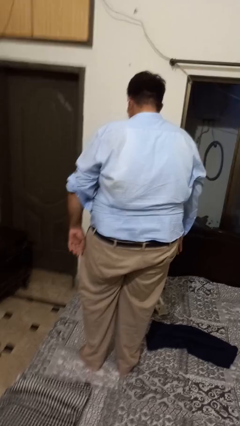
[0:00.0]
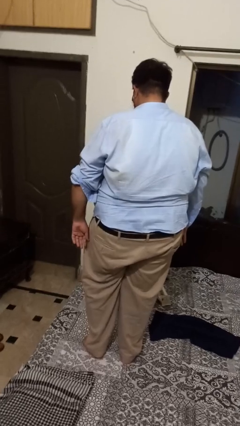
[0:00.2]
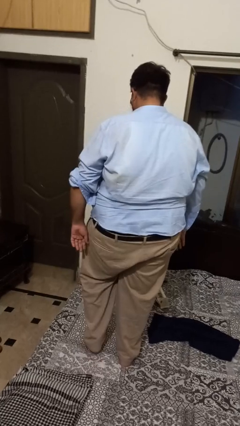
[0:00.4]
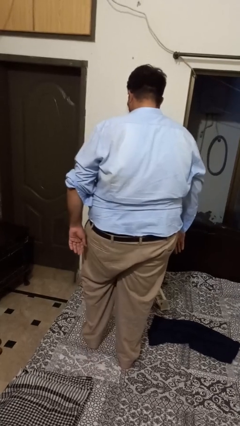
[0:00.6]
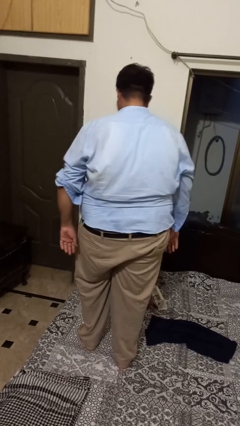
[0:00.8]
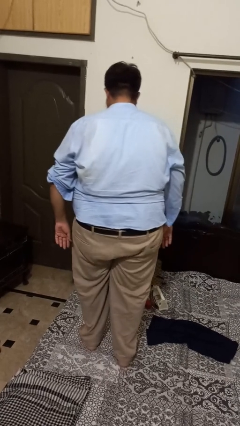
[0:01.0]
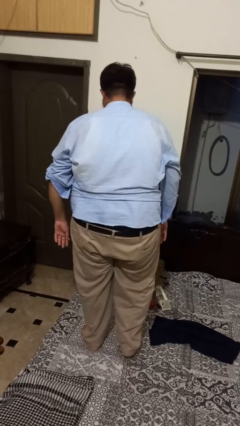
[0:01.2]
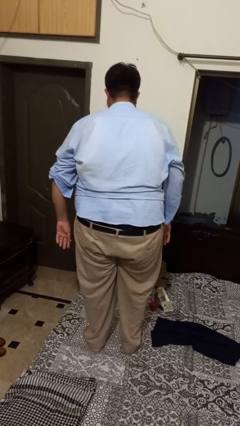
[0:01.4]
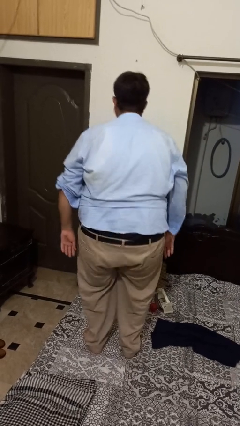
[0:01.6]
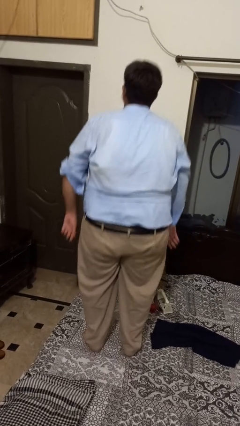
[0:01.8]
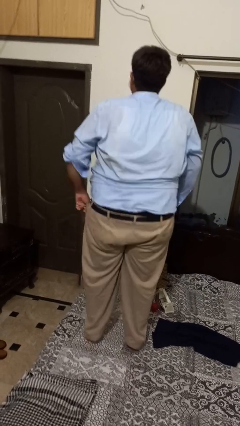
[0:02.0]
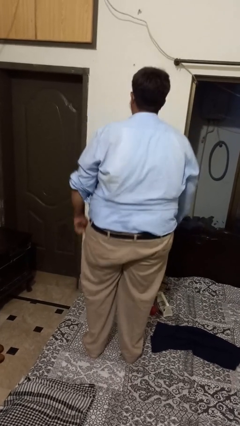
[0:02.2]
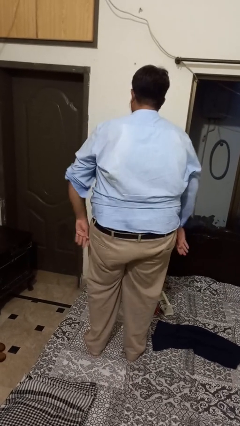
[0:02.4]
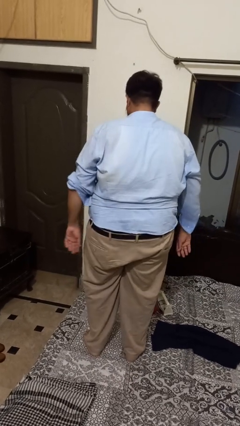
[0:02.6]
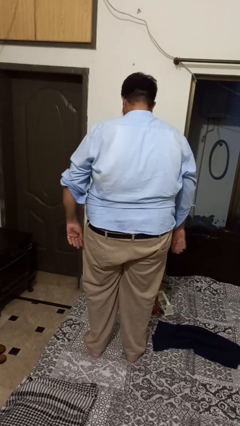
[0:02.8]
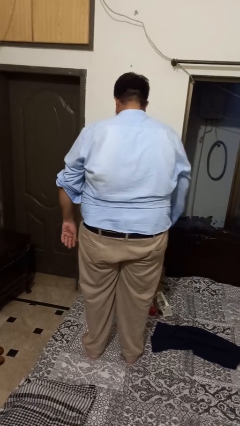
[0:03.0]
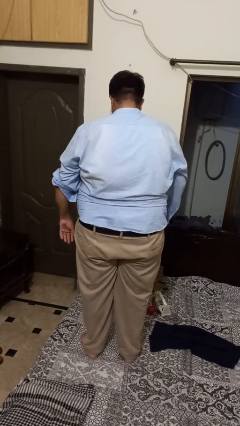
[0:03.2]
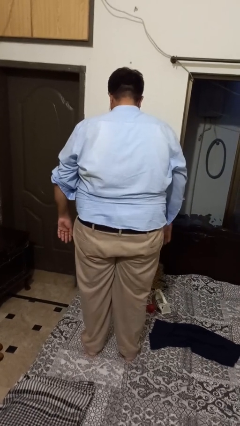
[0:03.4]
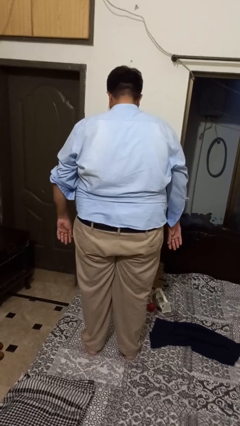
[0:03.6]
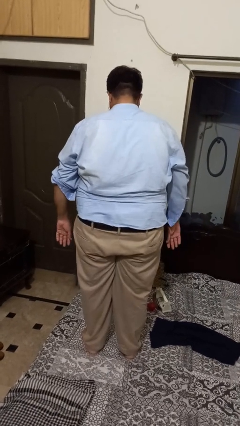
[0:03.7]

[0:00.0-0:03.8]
person jumps on bed

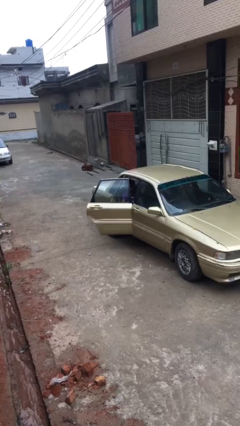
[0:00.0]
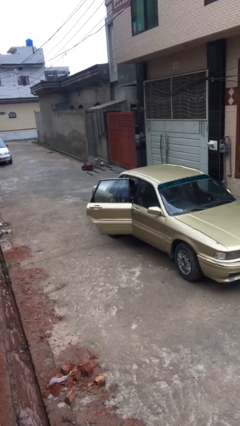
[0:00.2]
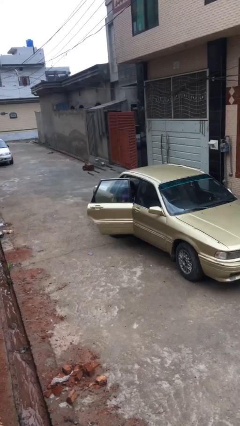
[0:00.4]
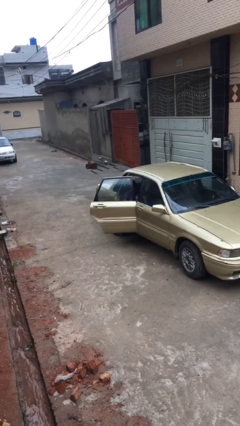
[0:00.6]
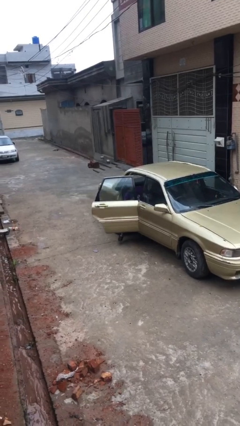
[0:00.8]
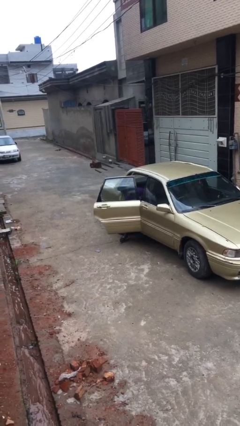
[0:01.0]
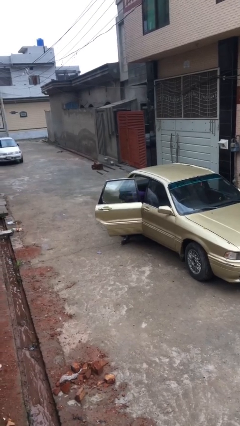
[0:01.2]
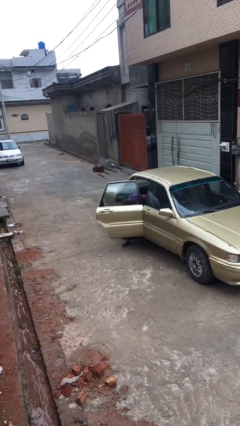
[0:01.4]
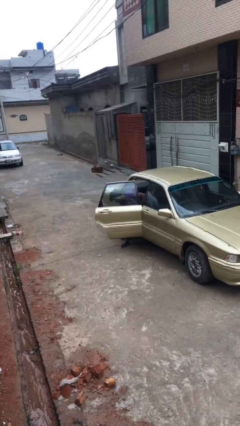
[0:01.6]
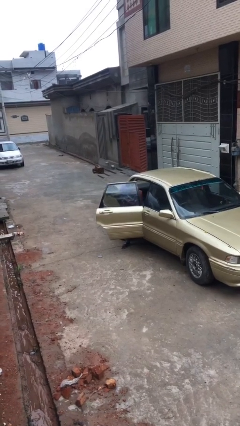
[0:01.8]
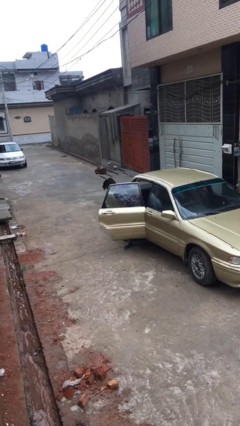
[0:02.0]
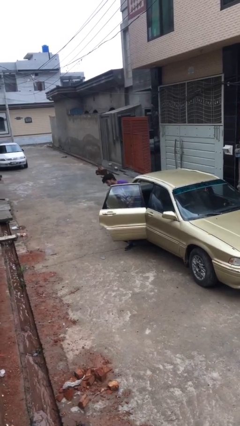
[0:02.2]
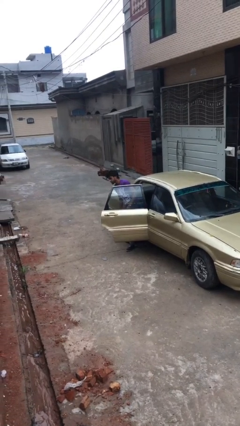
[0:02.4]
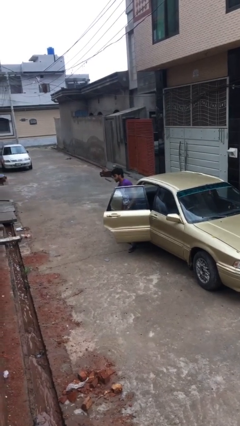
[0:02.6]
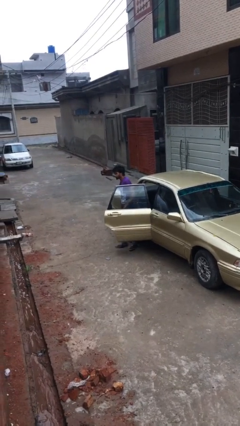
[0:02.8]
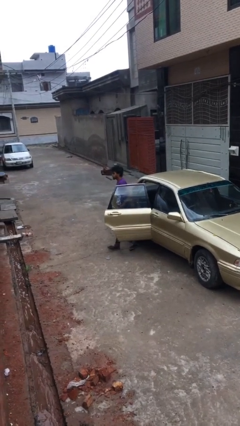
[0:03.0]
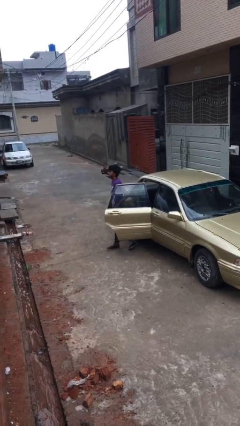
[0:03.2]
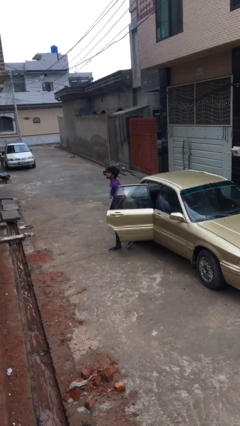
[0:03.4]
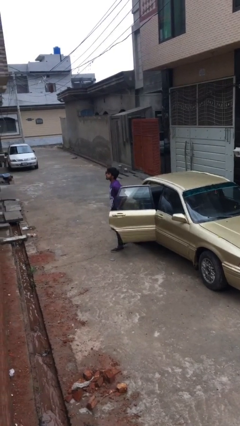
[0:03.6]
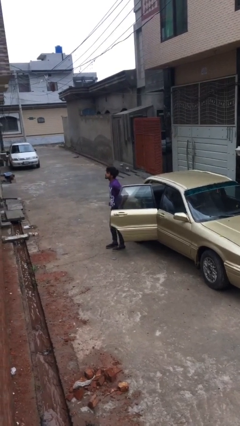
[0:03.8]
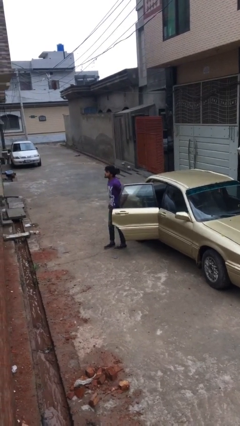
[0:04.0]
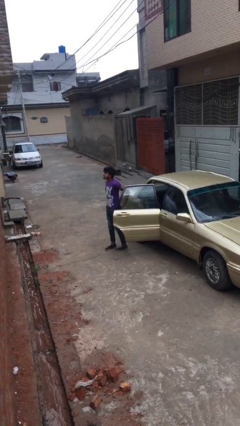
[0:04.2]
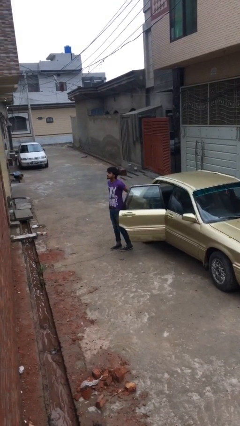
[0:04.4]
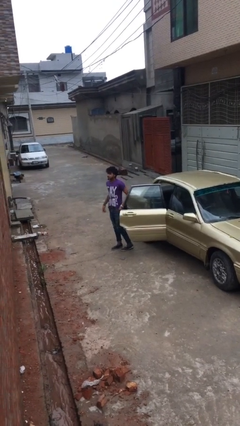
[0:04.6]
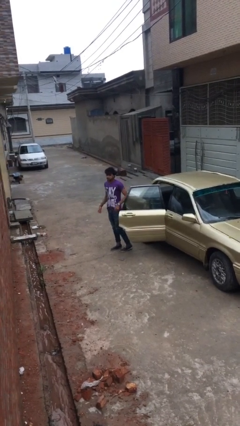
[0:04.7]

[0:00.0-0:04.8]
person exits car

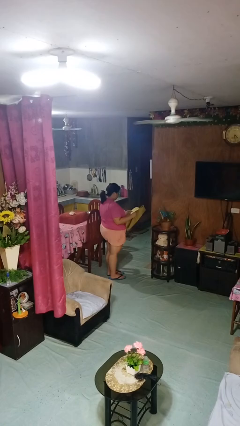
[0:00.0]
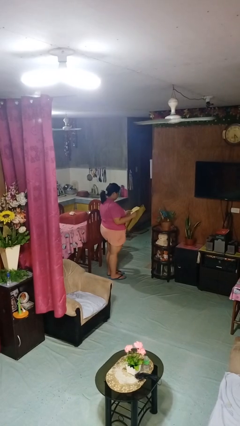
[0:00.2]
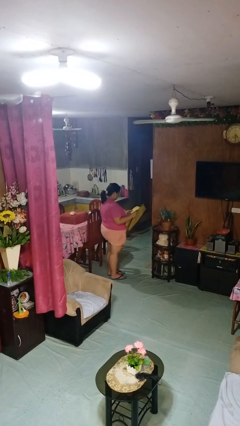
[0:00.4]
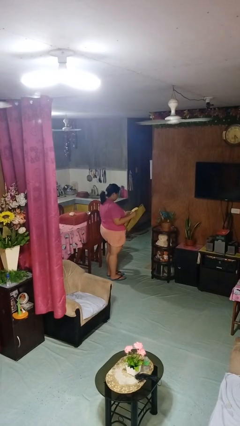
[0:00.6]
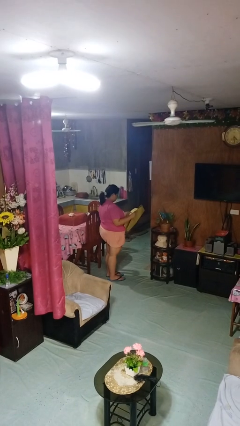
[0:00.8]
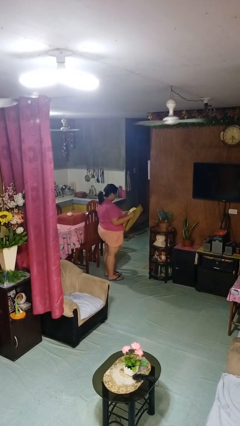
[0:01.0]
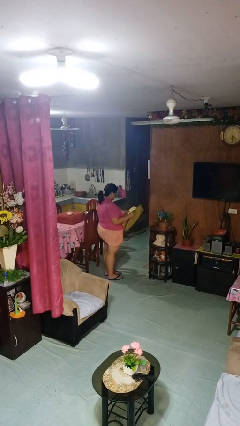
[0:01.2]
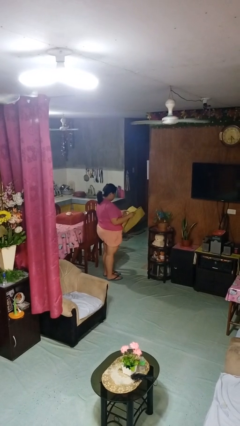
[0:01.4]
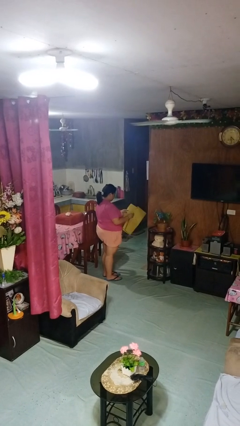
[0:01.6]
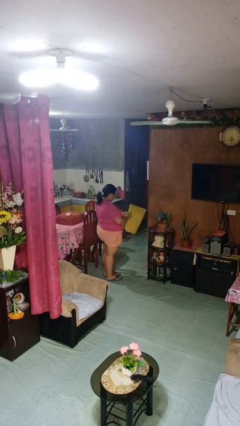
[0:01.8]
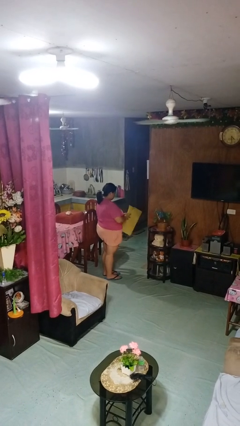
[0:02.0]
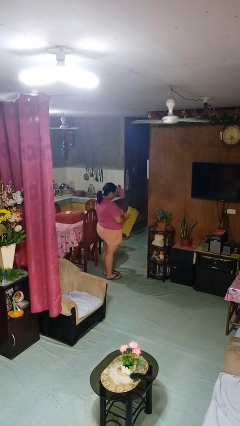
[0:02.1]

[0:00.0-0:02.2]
person reads newspaper

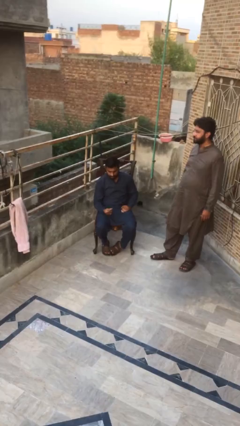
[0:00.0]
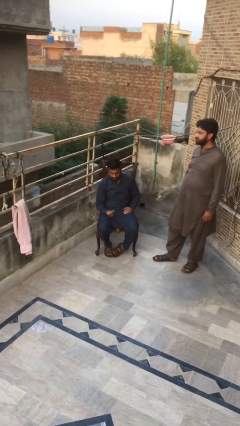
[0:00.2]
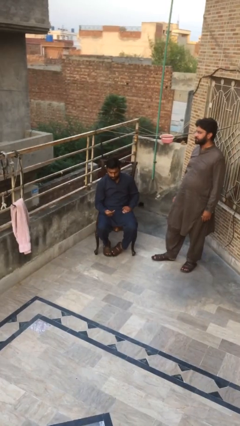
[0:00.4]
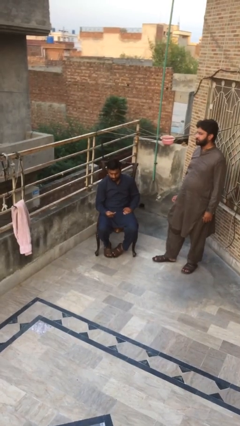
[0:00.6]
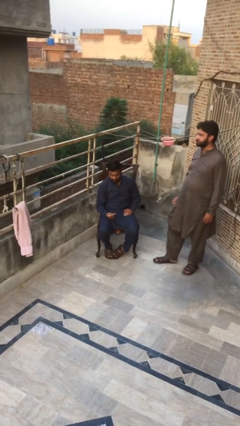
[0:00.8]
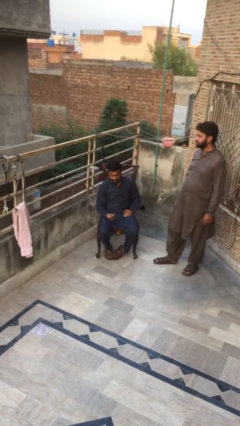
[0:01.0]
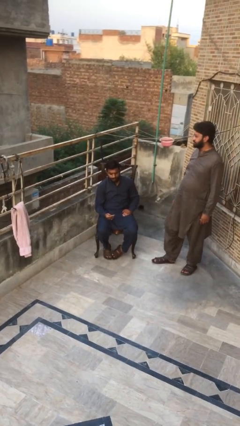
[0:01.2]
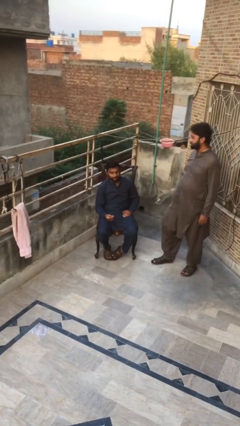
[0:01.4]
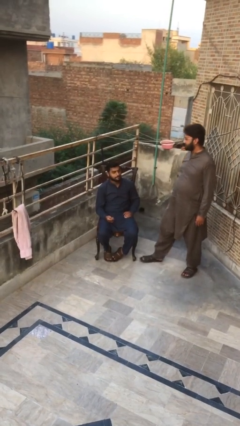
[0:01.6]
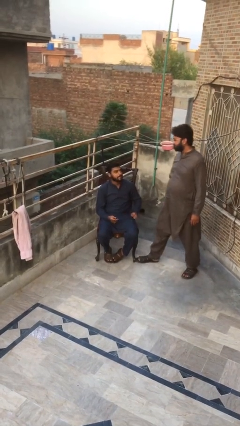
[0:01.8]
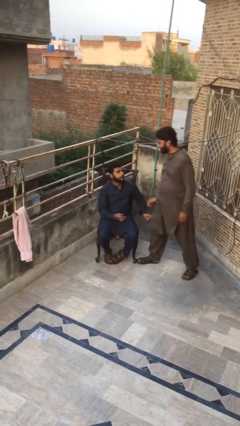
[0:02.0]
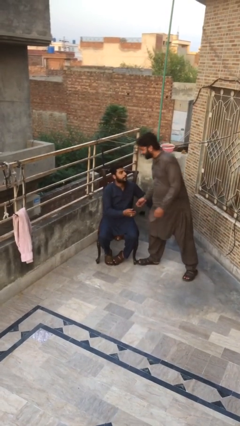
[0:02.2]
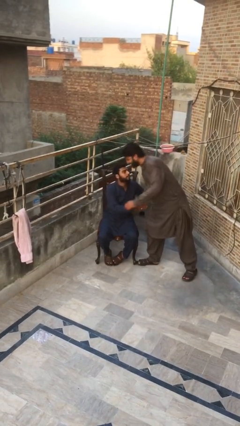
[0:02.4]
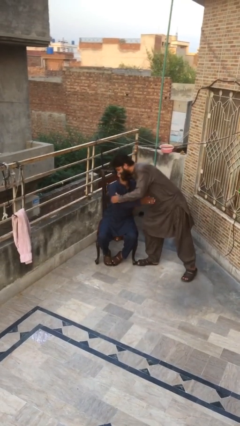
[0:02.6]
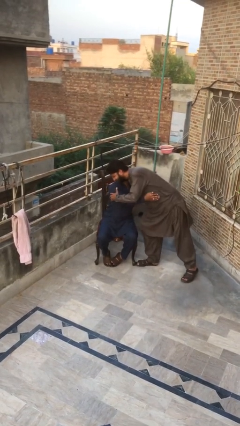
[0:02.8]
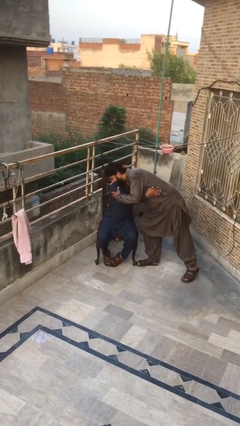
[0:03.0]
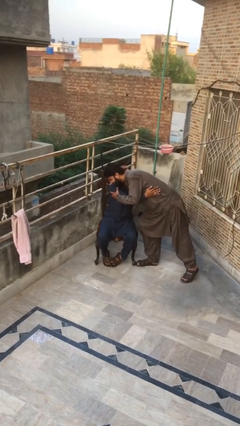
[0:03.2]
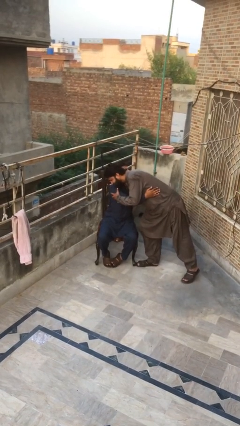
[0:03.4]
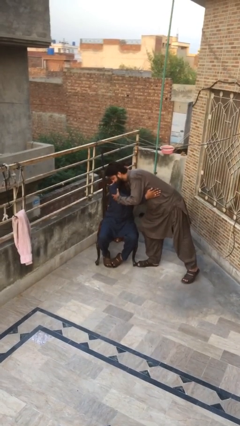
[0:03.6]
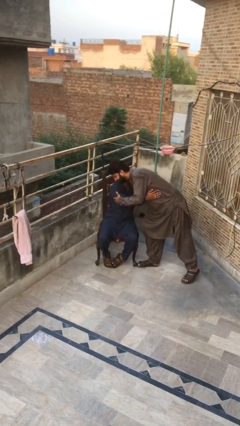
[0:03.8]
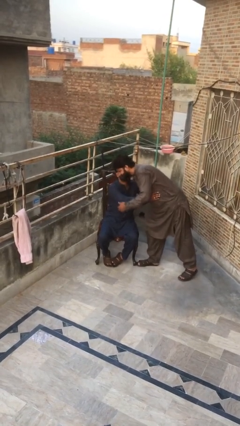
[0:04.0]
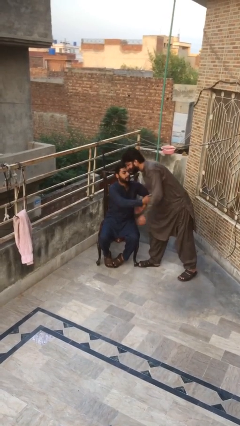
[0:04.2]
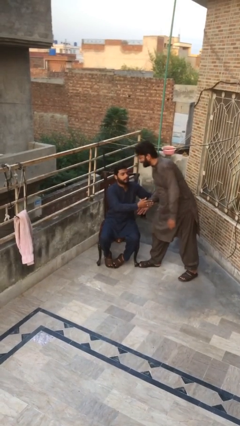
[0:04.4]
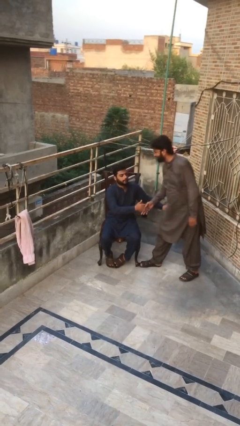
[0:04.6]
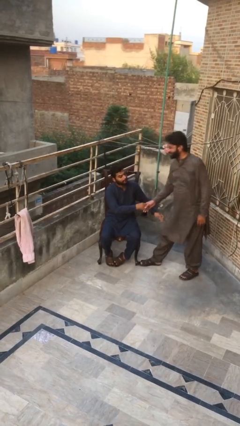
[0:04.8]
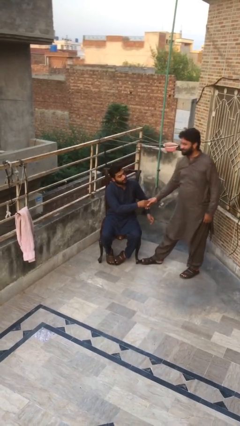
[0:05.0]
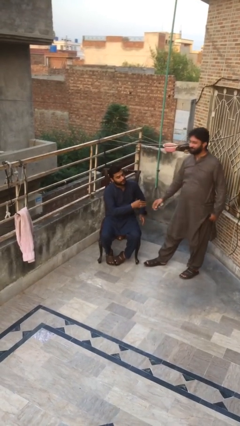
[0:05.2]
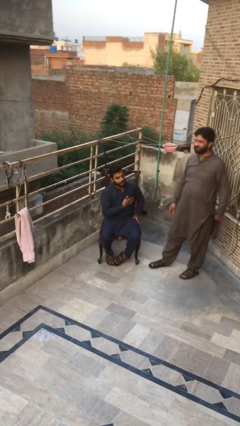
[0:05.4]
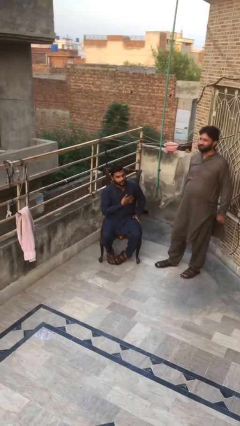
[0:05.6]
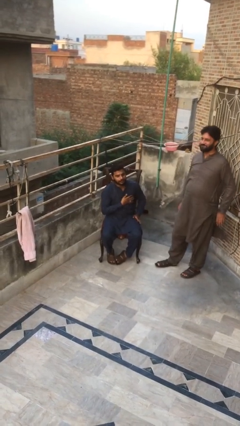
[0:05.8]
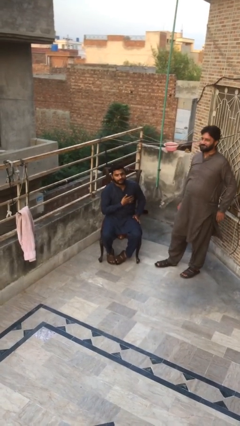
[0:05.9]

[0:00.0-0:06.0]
person embraces person

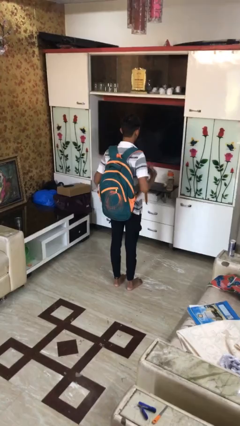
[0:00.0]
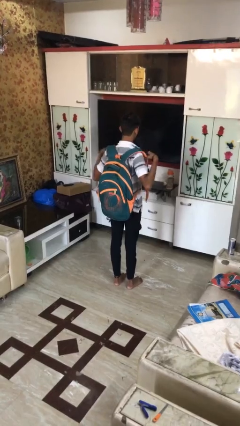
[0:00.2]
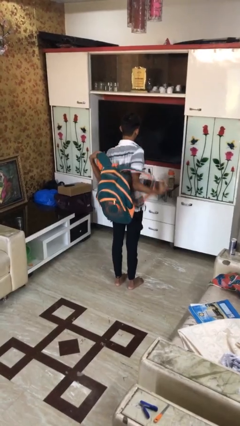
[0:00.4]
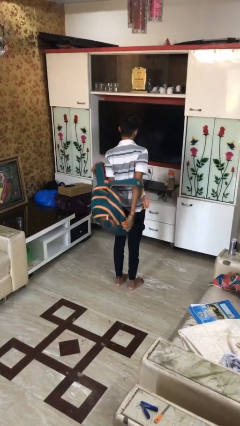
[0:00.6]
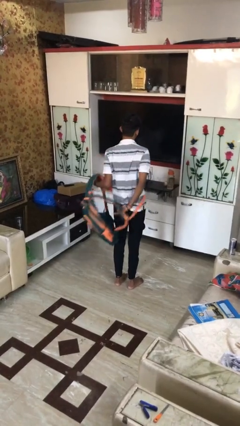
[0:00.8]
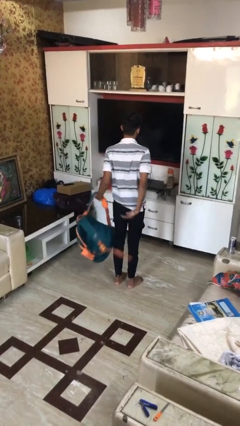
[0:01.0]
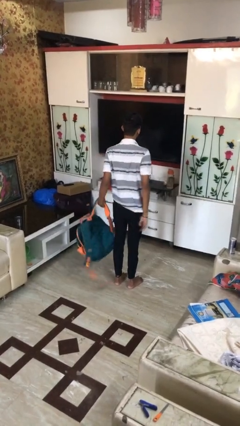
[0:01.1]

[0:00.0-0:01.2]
person takes off backpack
